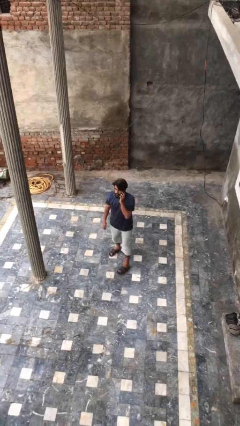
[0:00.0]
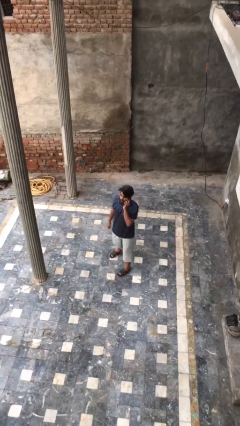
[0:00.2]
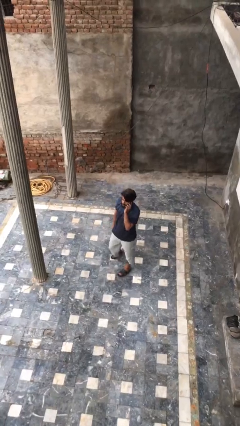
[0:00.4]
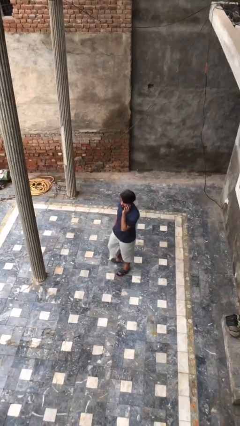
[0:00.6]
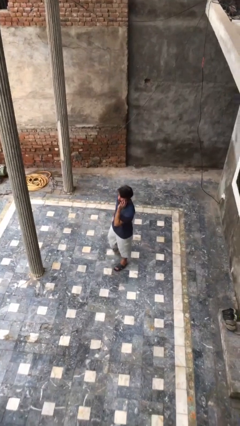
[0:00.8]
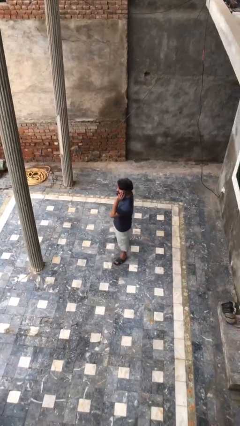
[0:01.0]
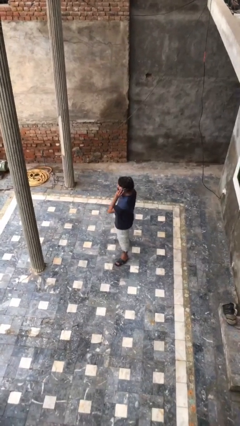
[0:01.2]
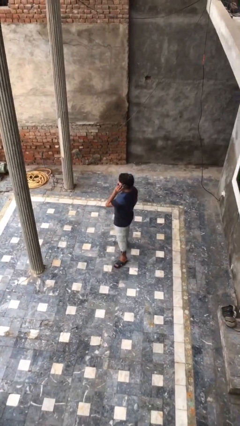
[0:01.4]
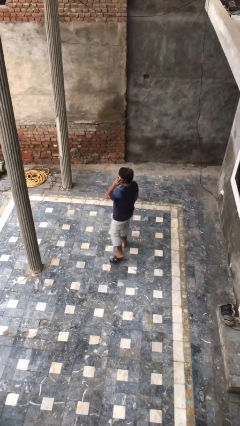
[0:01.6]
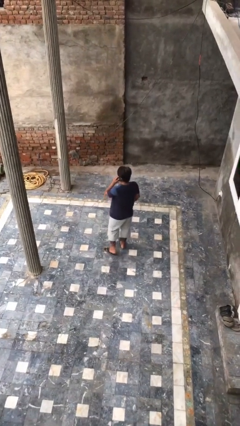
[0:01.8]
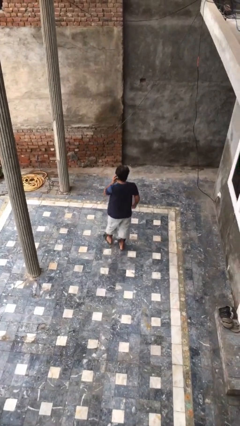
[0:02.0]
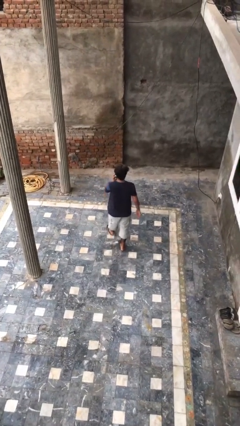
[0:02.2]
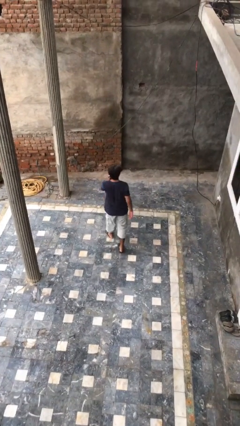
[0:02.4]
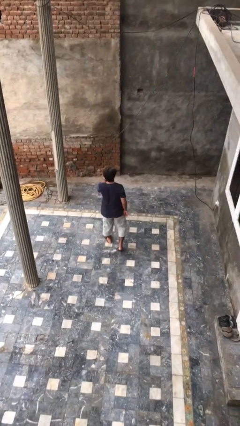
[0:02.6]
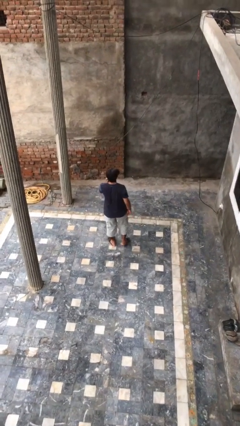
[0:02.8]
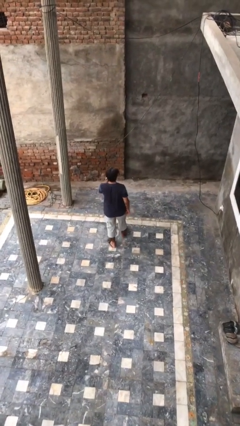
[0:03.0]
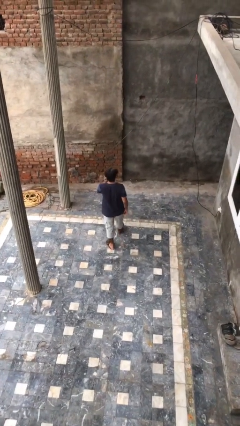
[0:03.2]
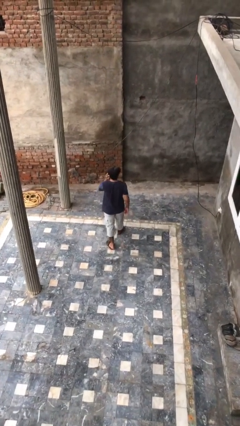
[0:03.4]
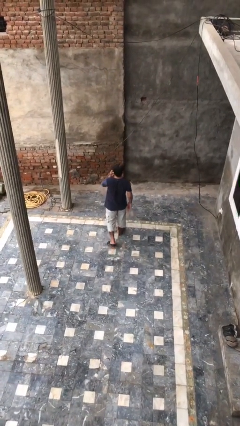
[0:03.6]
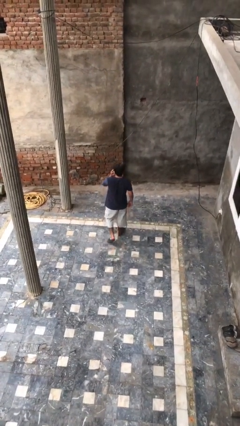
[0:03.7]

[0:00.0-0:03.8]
person talks on phone

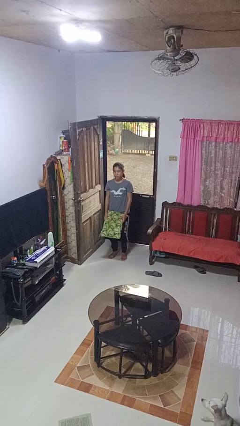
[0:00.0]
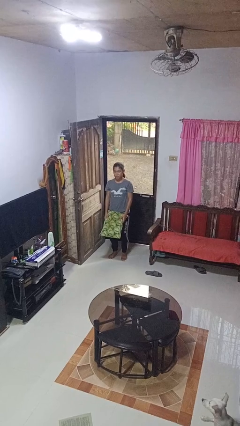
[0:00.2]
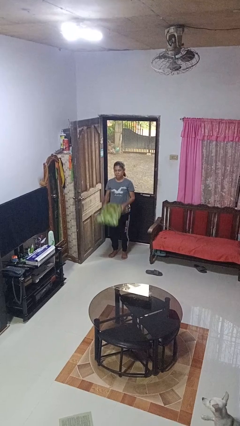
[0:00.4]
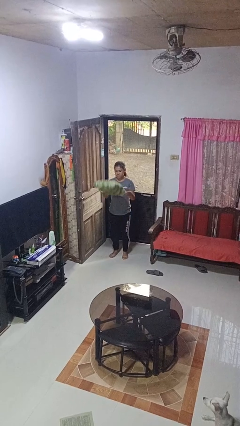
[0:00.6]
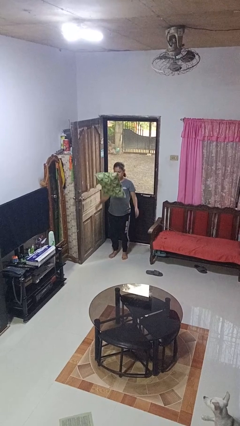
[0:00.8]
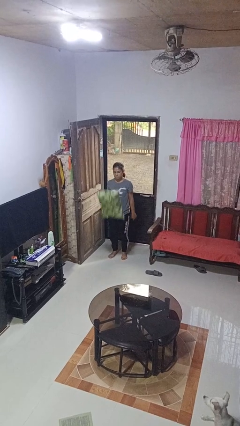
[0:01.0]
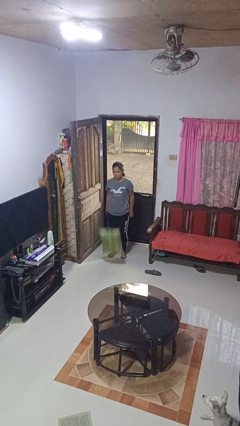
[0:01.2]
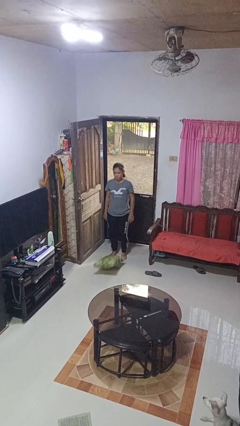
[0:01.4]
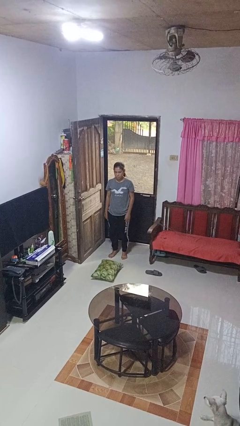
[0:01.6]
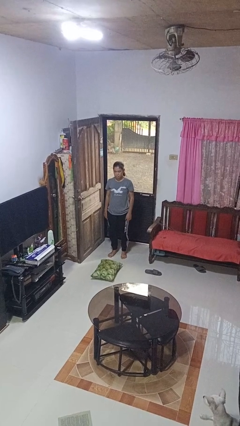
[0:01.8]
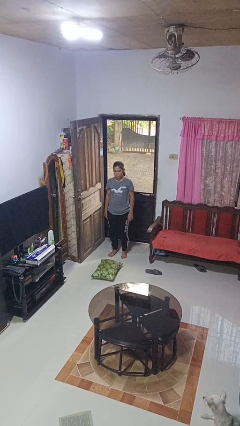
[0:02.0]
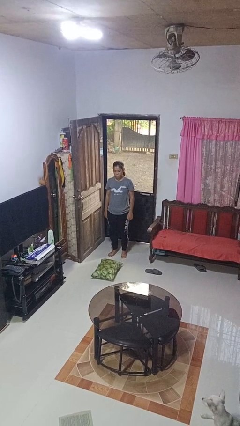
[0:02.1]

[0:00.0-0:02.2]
person throws object into air

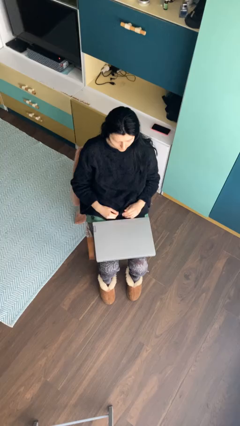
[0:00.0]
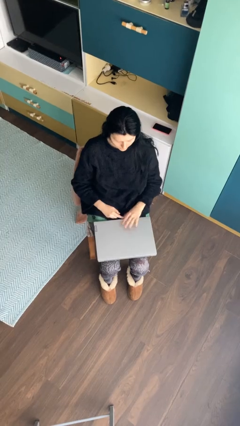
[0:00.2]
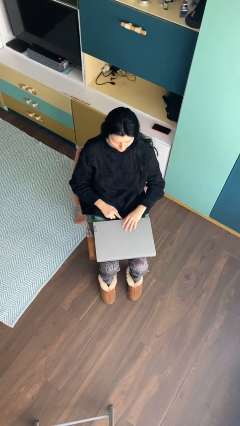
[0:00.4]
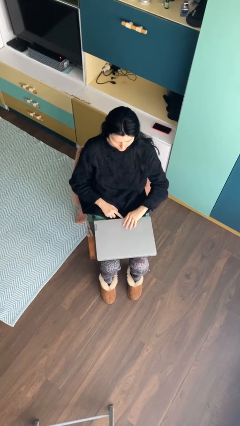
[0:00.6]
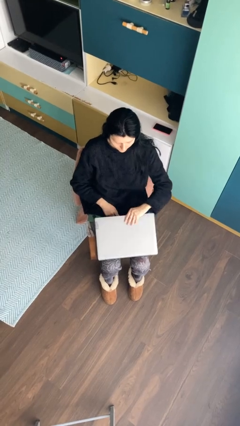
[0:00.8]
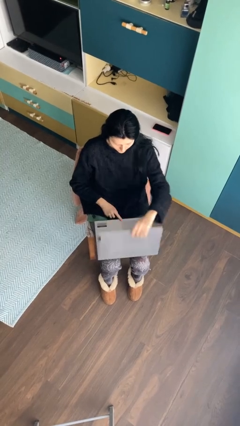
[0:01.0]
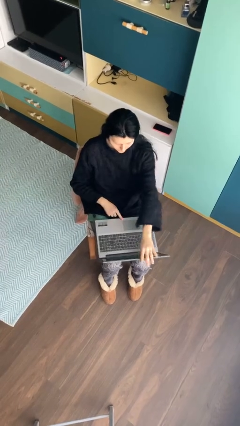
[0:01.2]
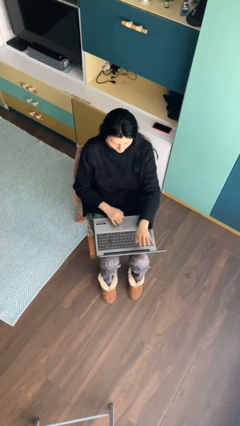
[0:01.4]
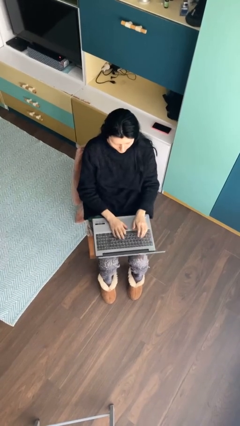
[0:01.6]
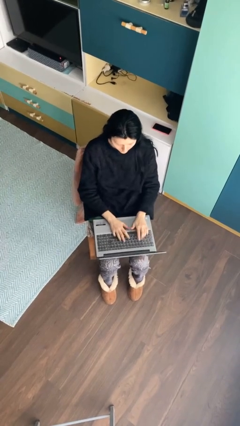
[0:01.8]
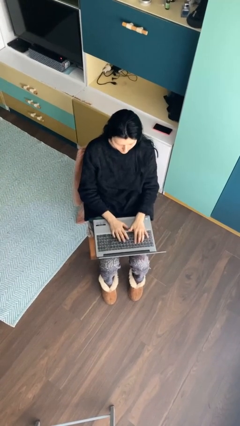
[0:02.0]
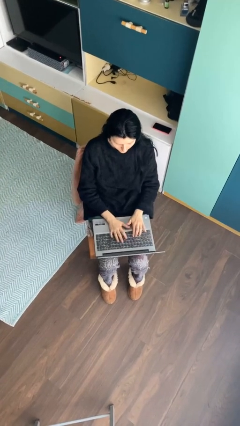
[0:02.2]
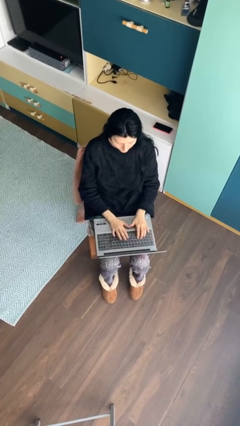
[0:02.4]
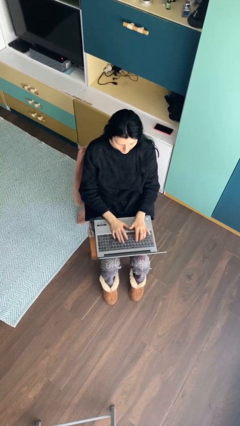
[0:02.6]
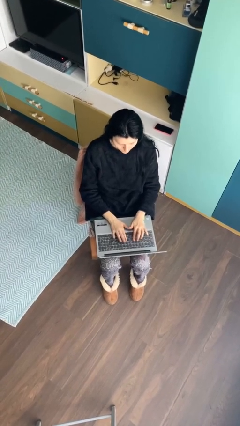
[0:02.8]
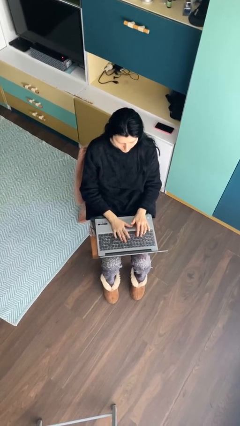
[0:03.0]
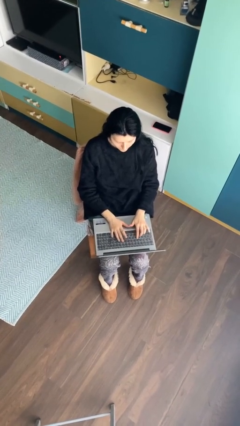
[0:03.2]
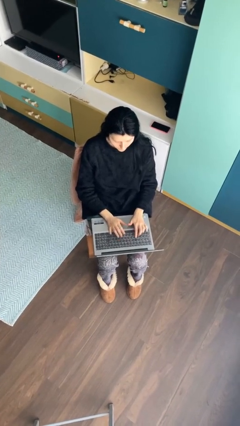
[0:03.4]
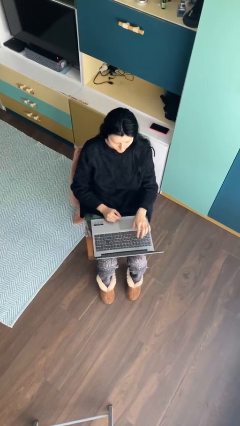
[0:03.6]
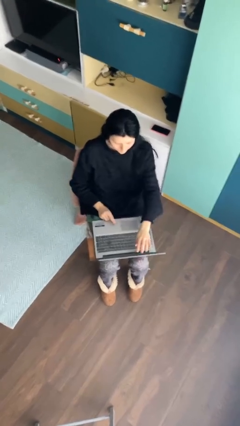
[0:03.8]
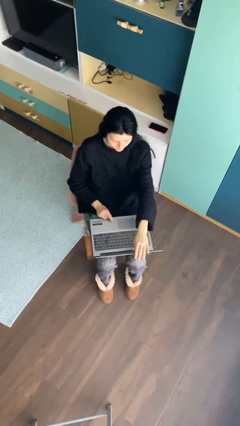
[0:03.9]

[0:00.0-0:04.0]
person interacts with laptop

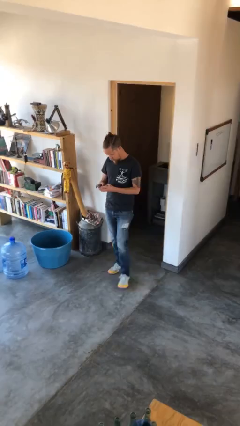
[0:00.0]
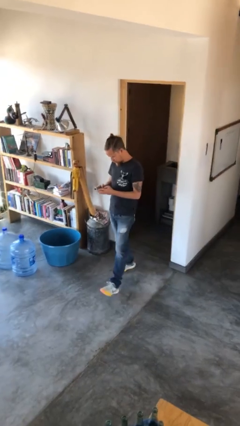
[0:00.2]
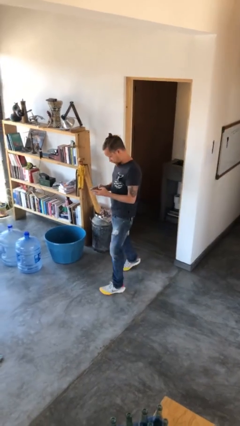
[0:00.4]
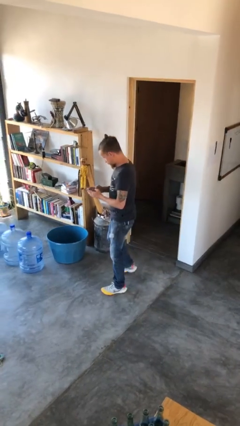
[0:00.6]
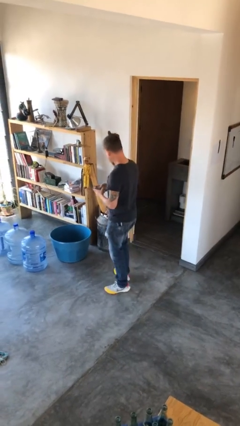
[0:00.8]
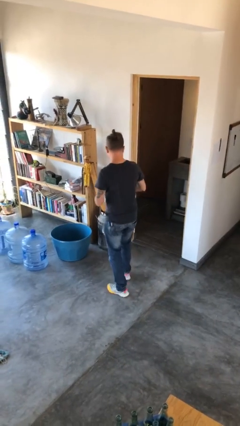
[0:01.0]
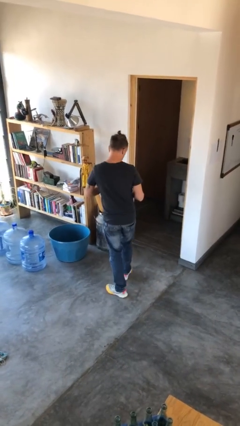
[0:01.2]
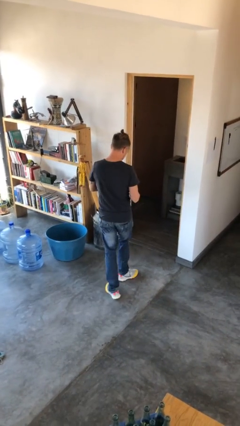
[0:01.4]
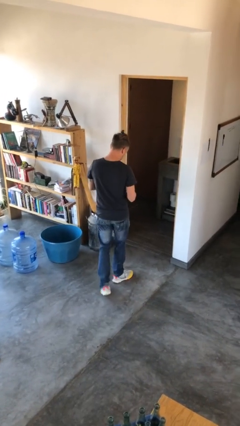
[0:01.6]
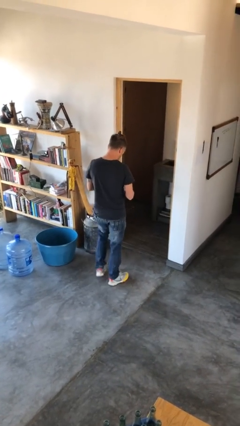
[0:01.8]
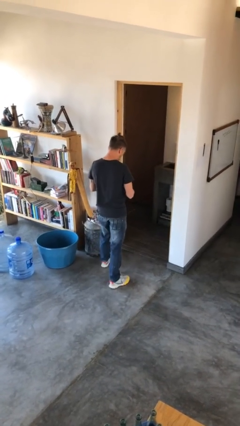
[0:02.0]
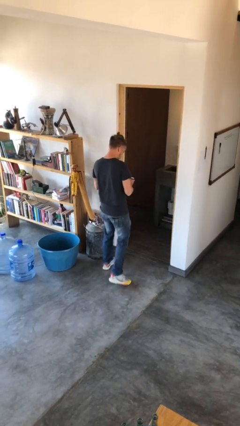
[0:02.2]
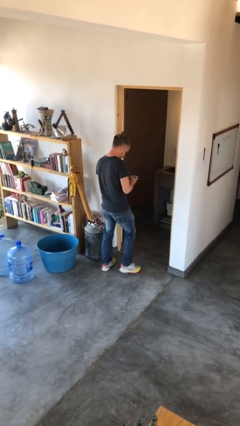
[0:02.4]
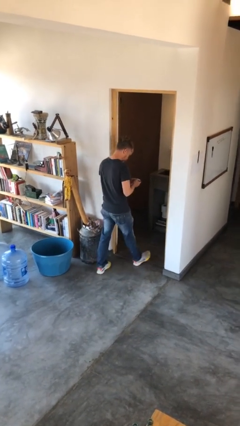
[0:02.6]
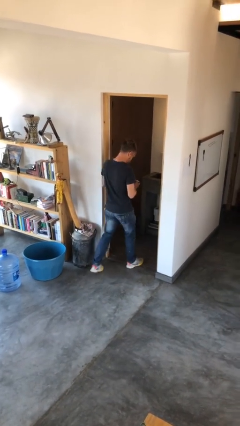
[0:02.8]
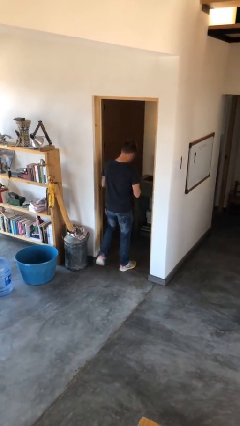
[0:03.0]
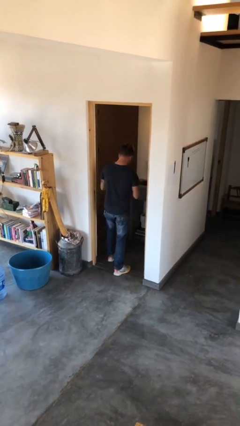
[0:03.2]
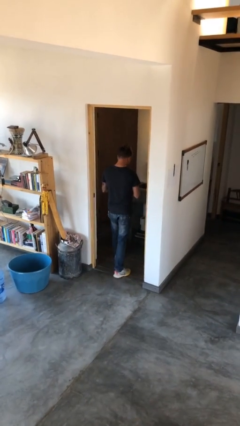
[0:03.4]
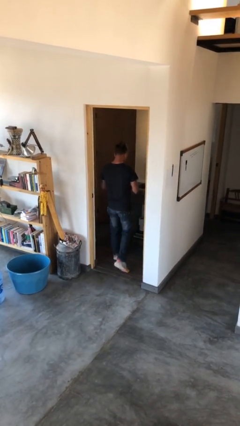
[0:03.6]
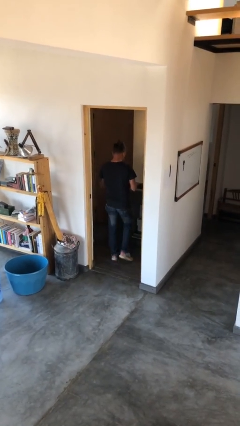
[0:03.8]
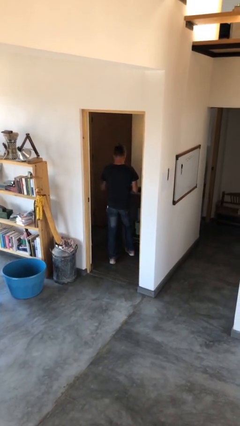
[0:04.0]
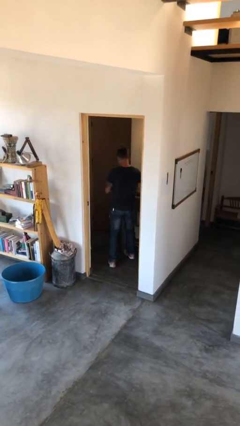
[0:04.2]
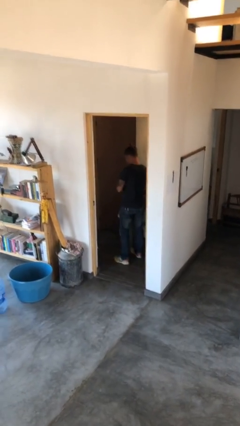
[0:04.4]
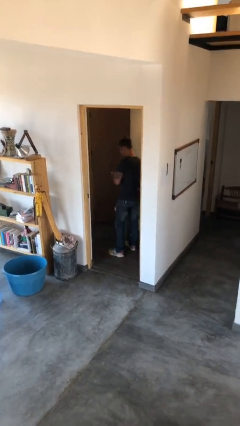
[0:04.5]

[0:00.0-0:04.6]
person exits scene through structure

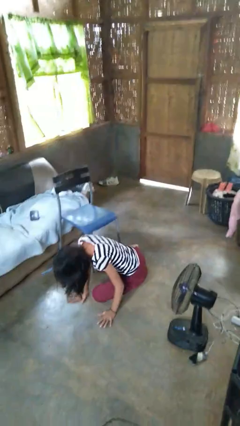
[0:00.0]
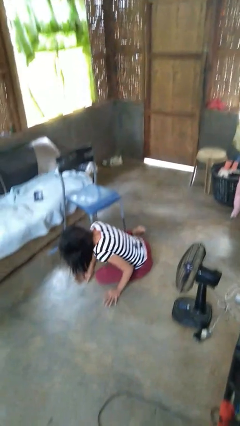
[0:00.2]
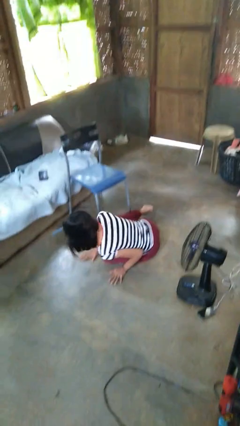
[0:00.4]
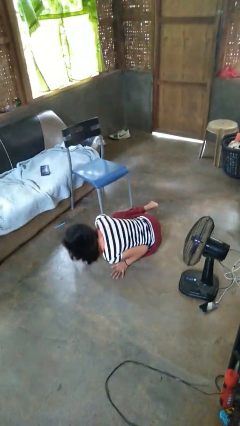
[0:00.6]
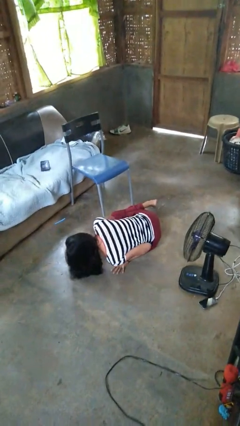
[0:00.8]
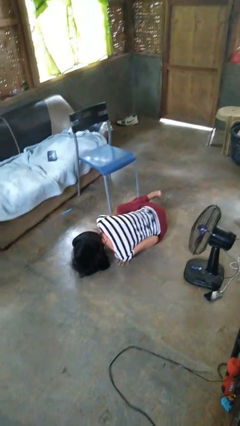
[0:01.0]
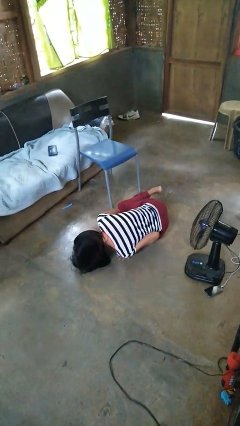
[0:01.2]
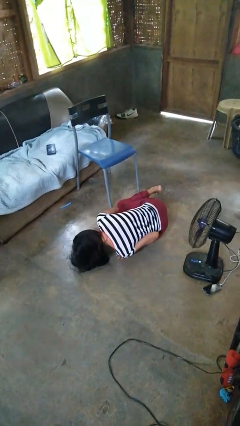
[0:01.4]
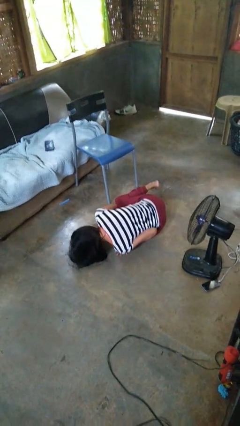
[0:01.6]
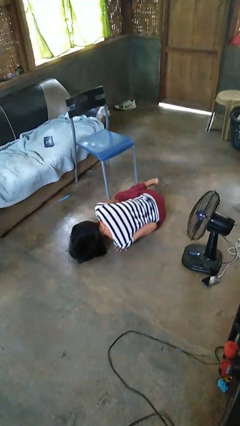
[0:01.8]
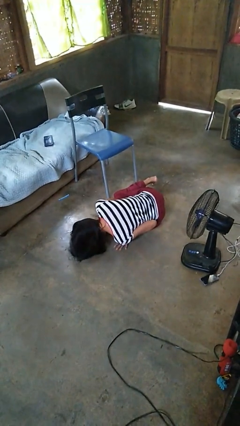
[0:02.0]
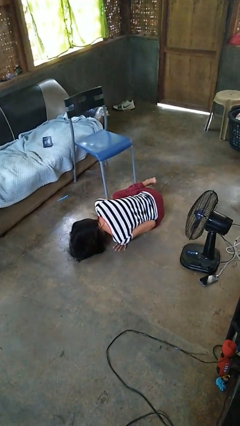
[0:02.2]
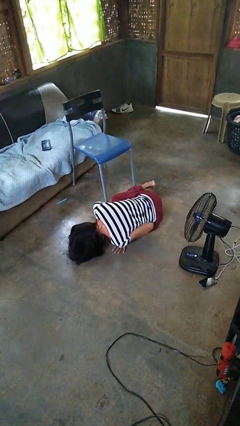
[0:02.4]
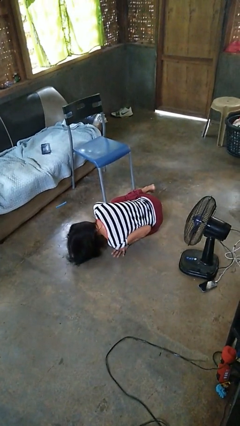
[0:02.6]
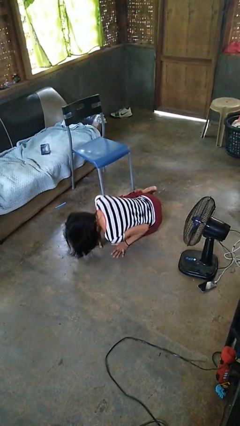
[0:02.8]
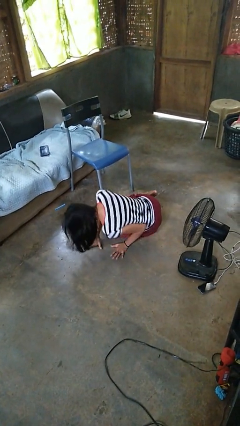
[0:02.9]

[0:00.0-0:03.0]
person lies down on floor

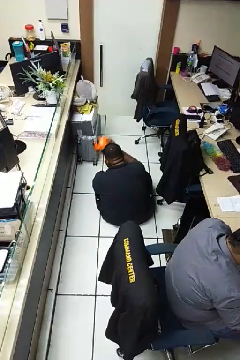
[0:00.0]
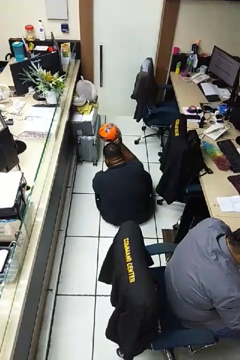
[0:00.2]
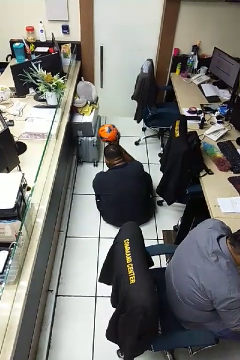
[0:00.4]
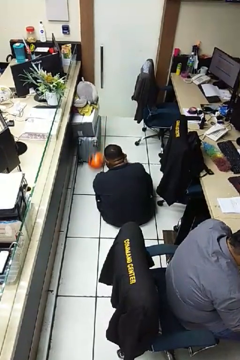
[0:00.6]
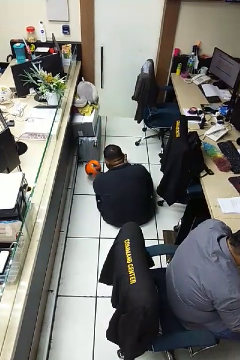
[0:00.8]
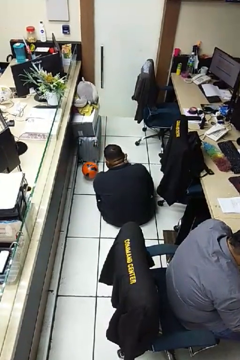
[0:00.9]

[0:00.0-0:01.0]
person bounces ball on floor
